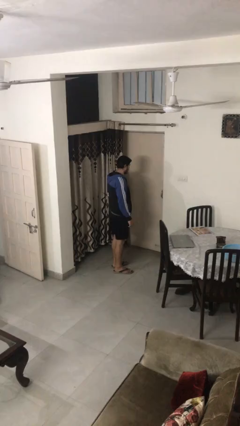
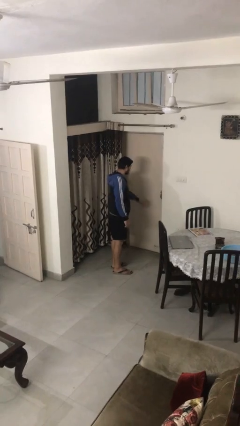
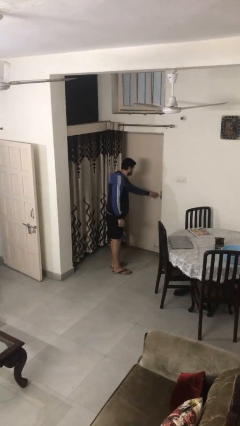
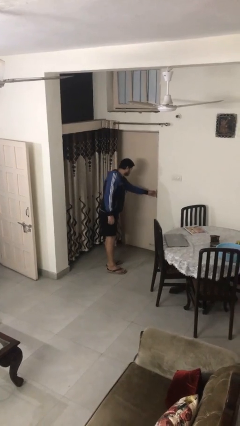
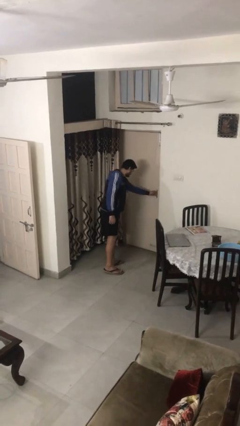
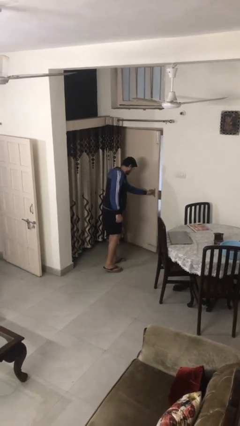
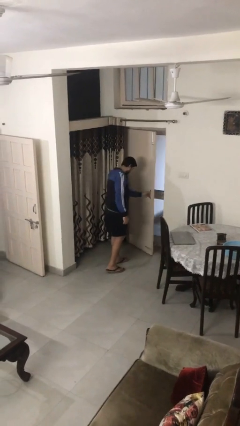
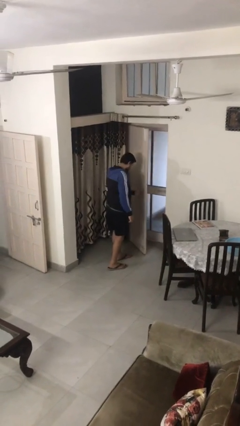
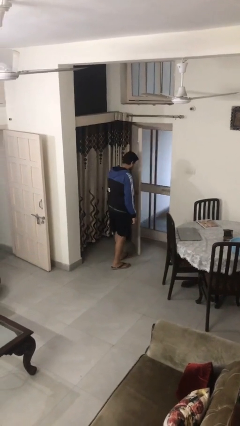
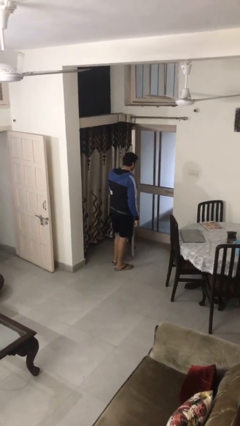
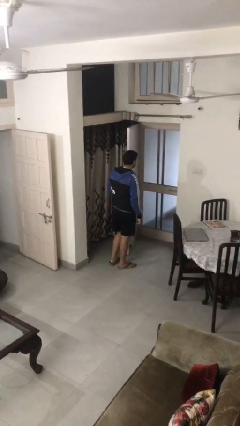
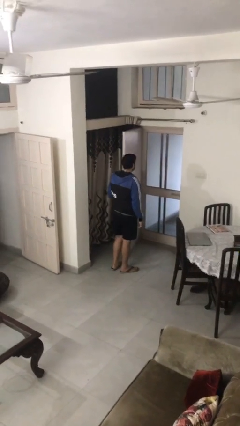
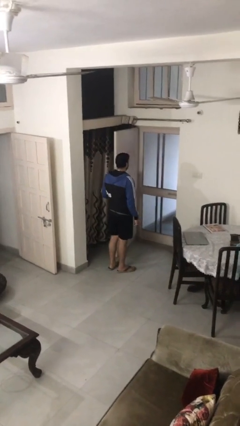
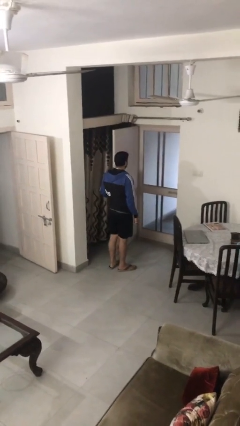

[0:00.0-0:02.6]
person opens facility door

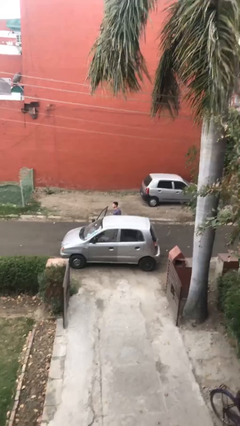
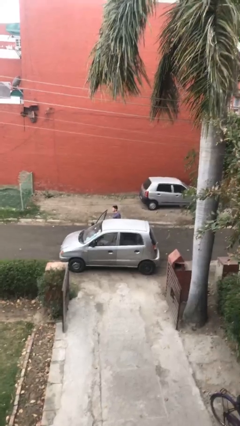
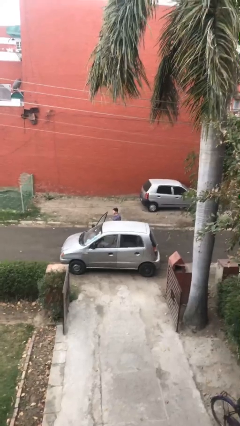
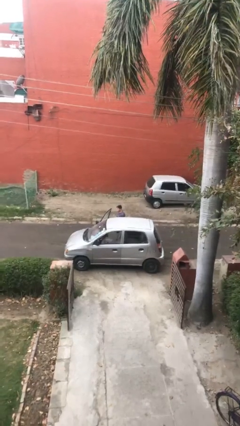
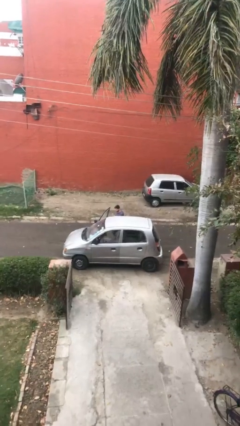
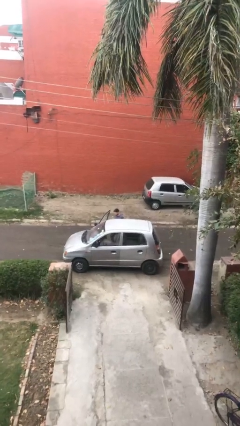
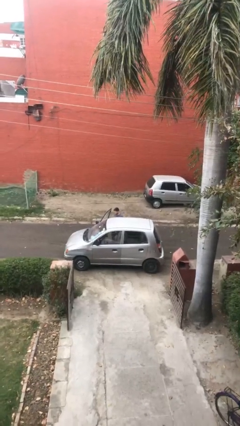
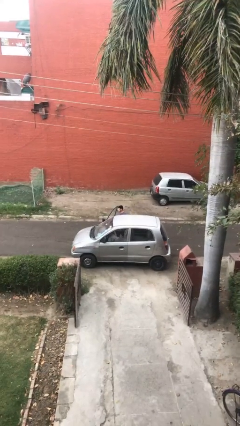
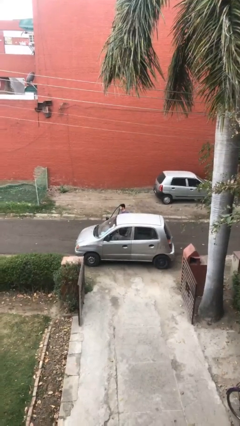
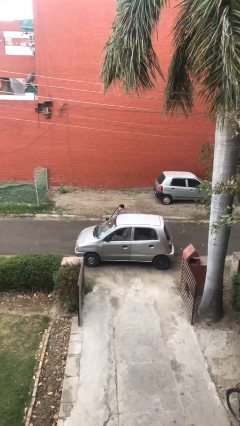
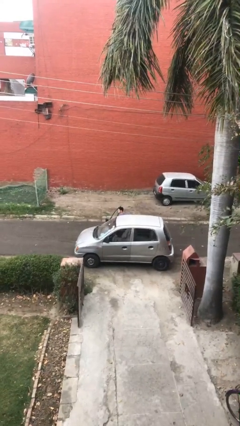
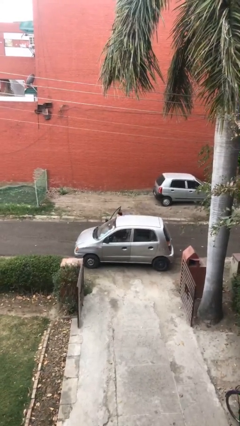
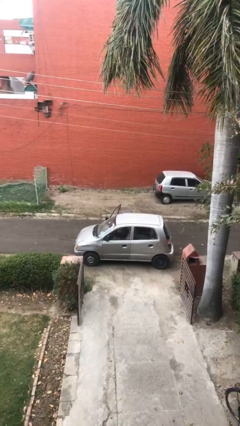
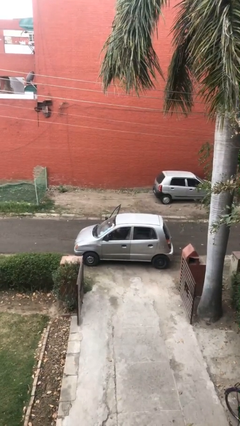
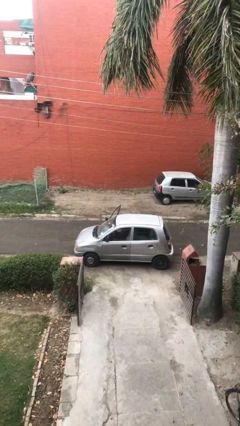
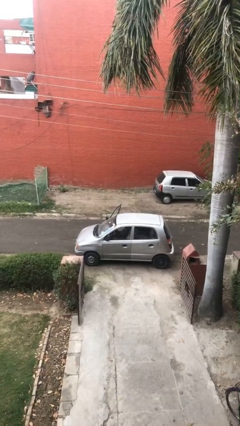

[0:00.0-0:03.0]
person enters car

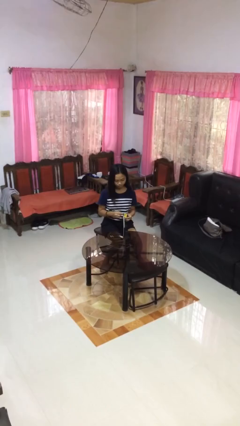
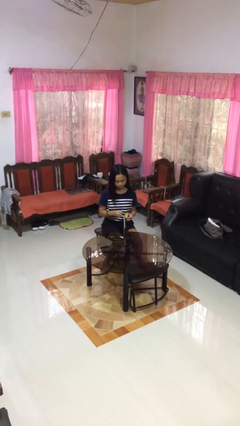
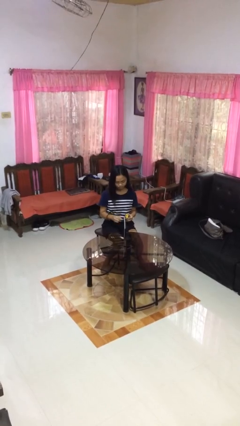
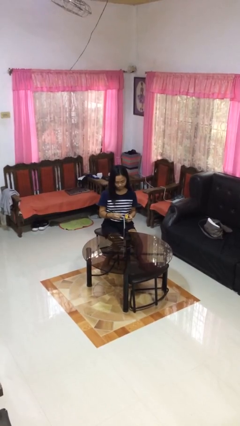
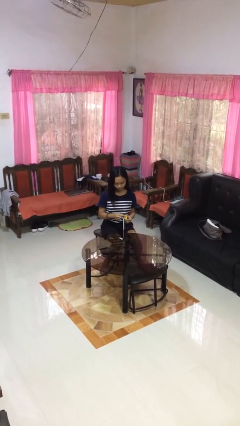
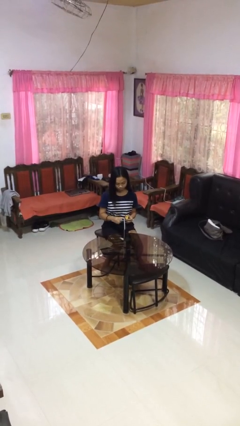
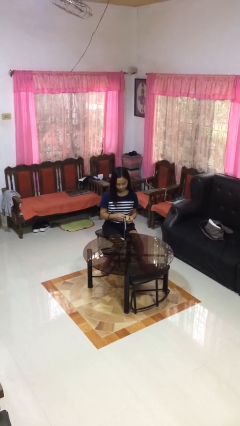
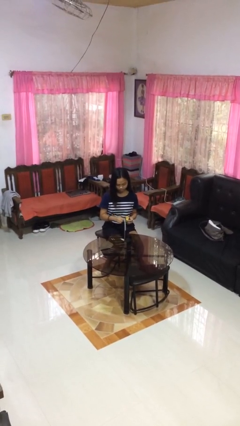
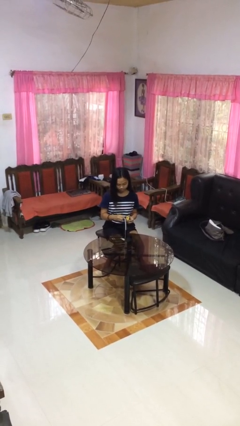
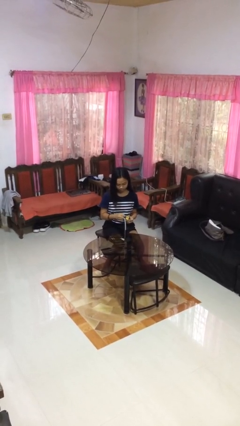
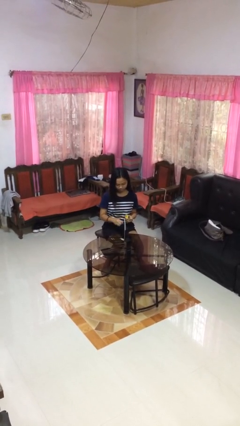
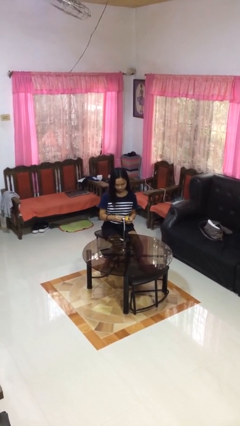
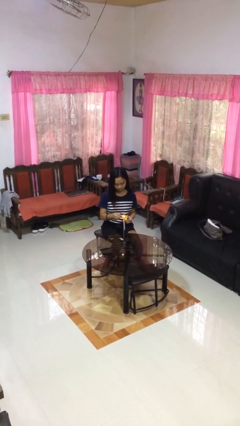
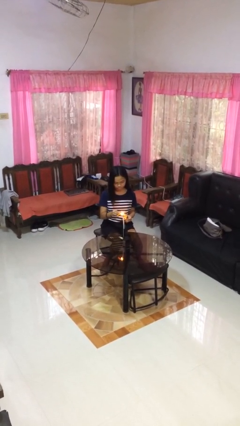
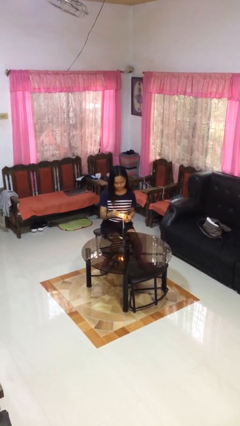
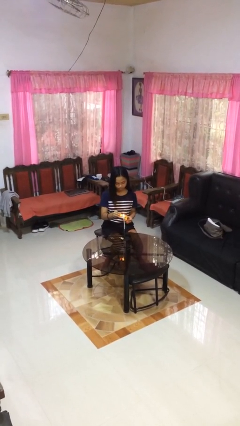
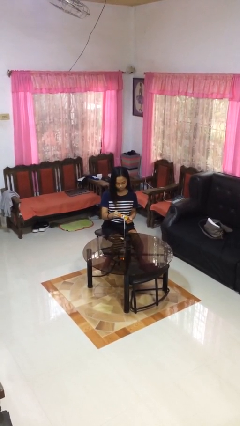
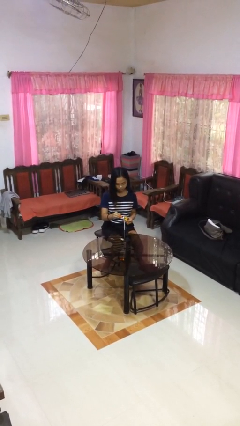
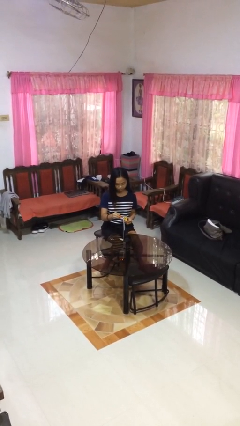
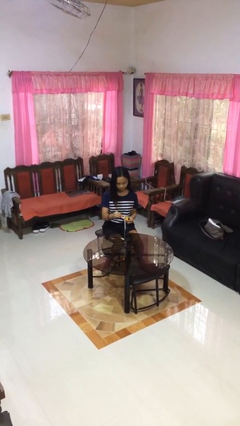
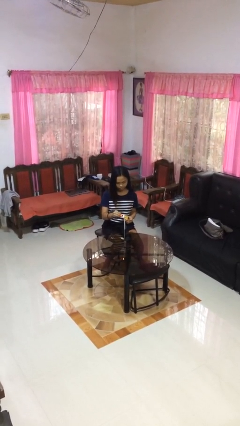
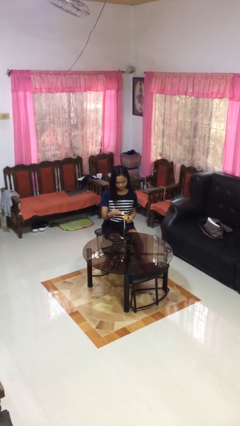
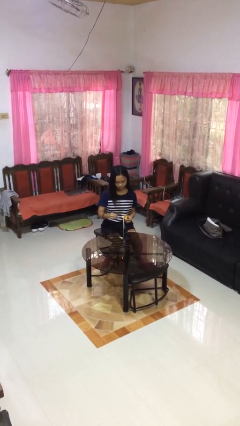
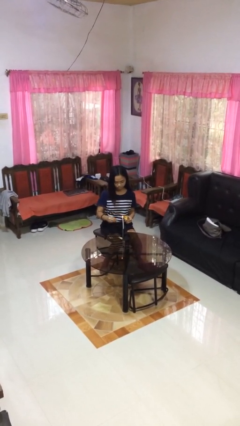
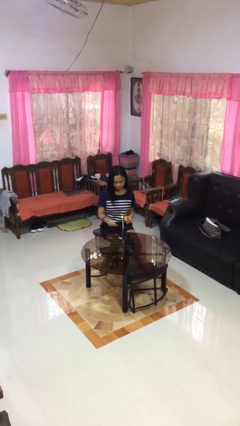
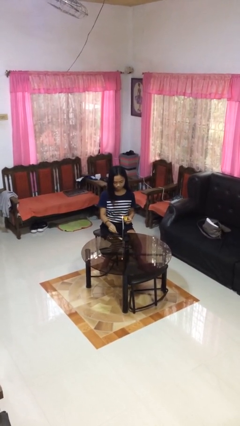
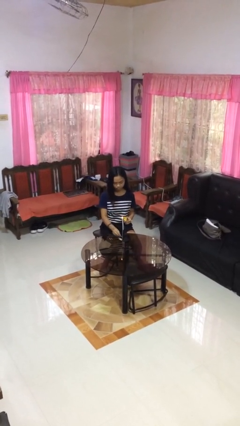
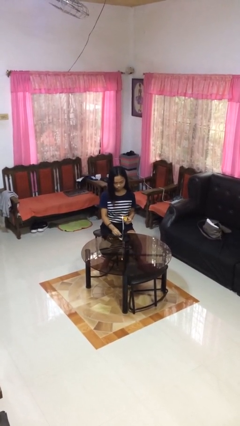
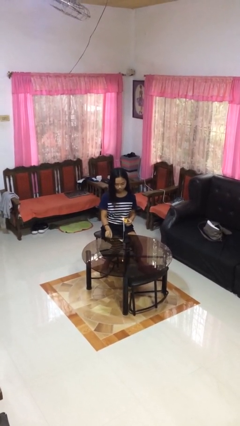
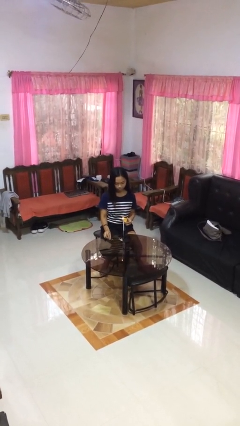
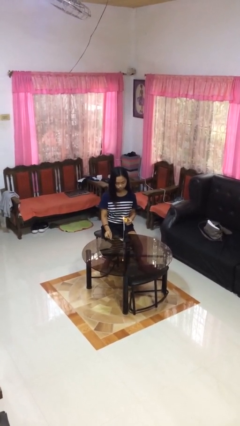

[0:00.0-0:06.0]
person lights candle

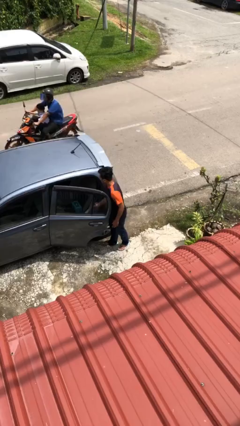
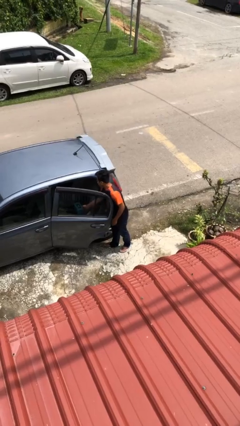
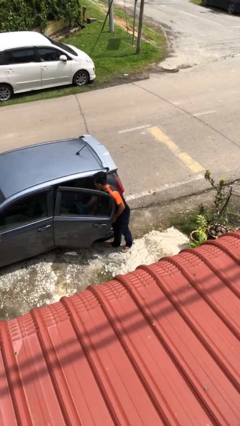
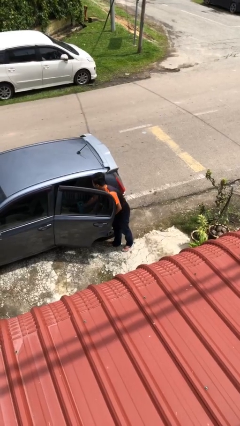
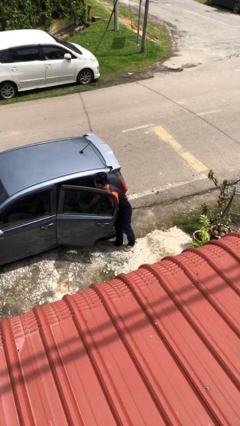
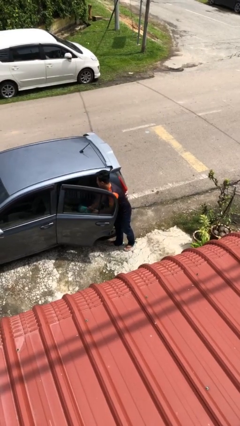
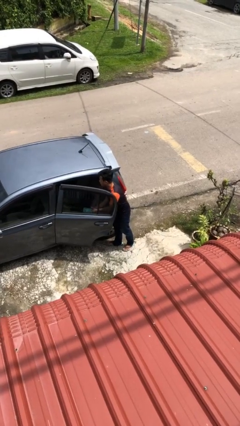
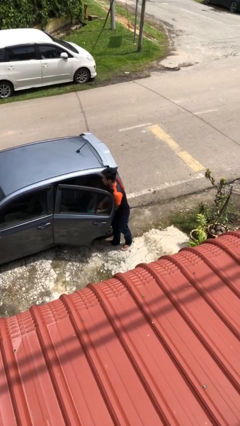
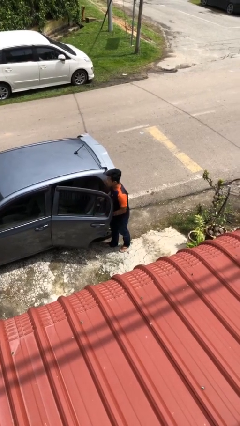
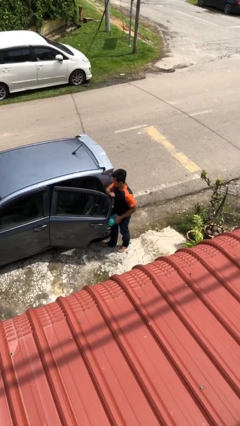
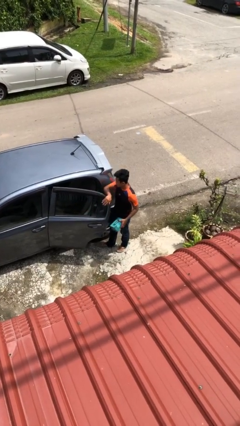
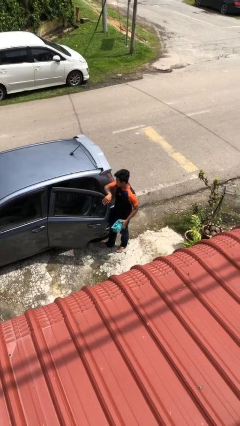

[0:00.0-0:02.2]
person unloads car

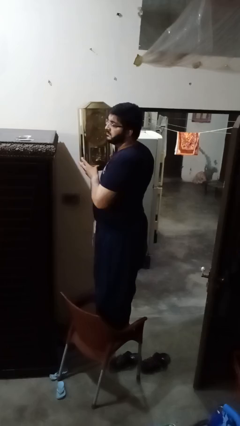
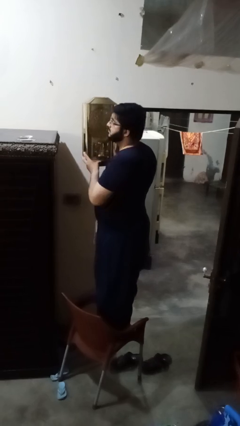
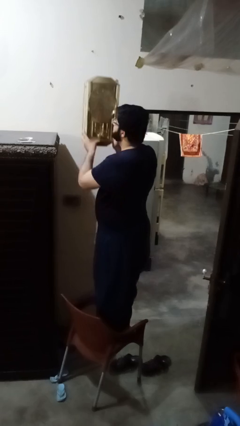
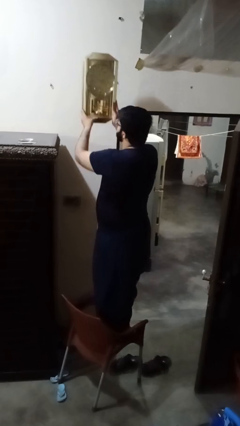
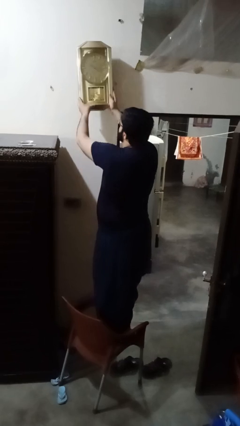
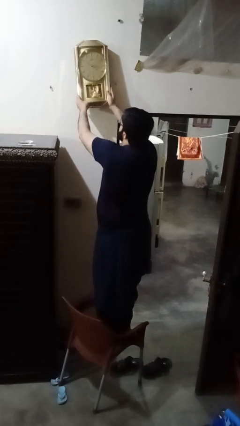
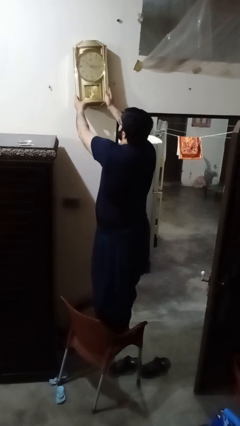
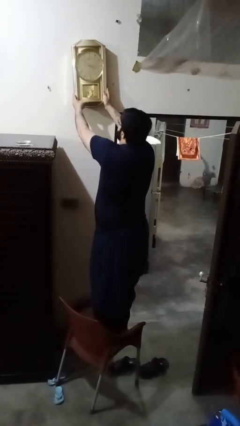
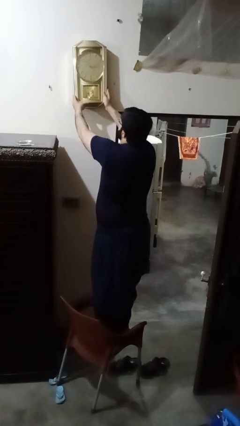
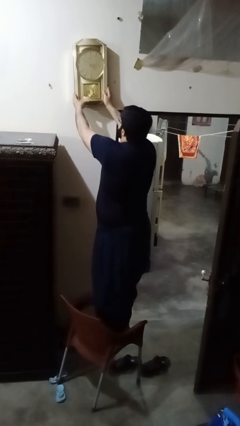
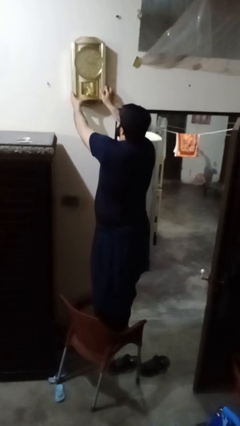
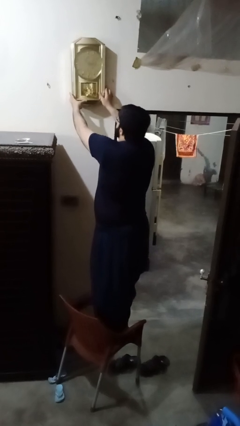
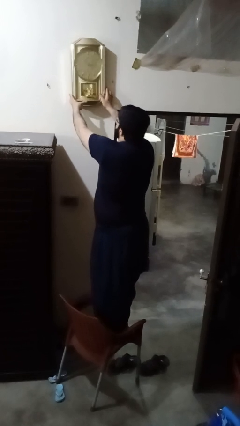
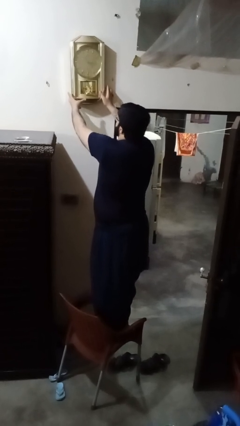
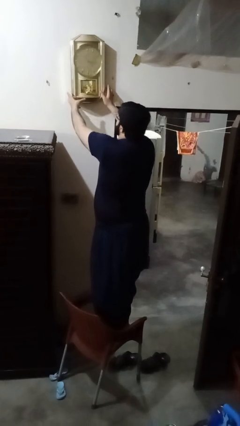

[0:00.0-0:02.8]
person puts up smoke detector

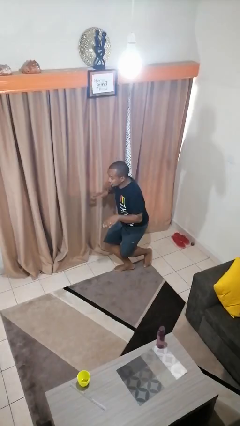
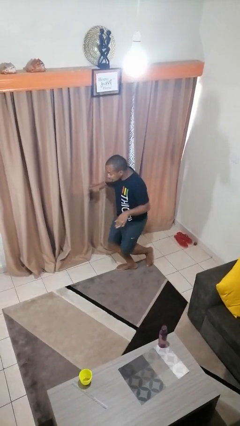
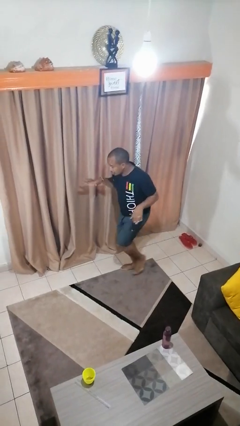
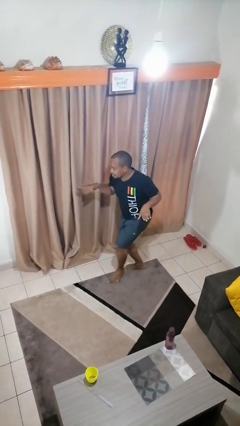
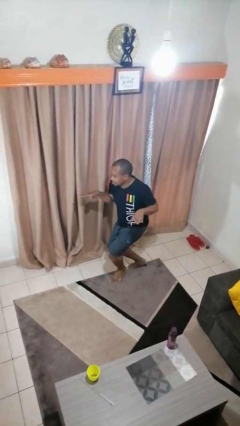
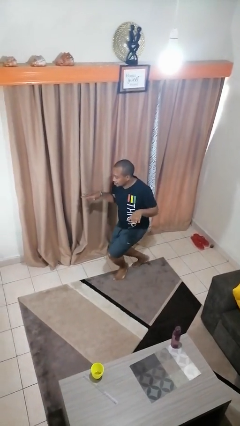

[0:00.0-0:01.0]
person throws object into air

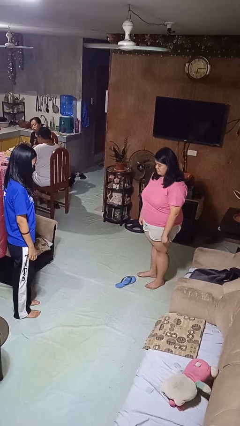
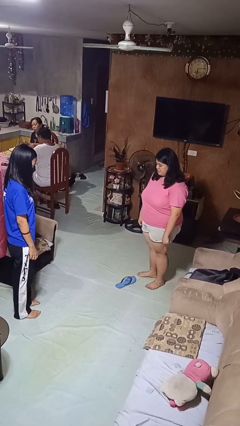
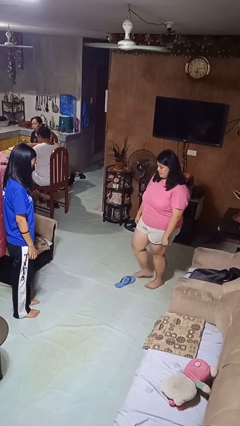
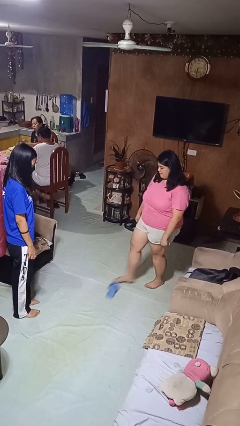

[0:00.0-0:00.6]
person kicks object to person
